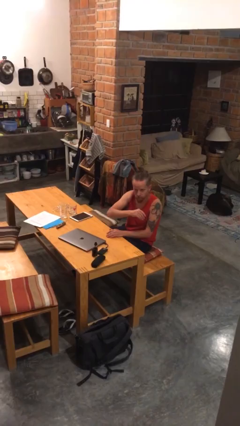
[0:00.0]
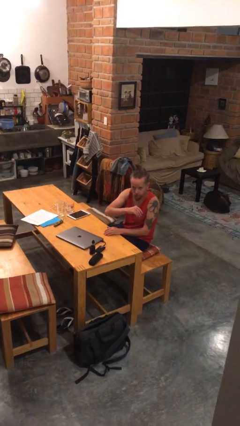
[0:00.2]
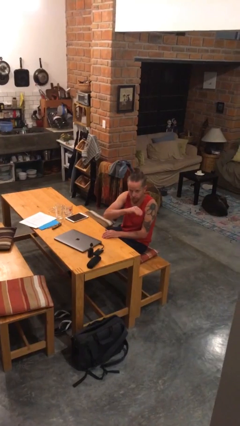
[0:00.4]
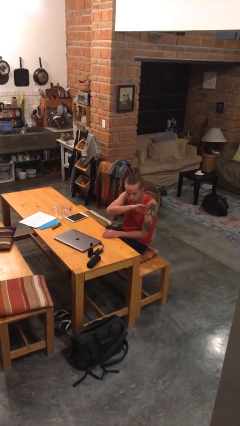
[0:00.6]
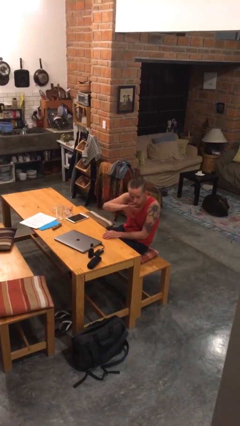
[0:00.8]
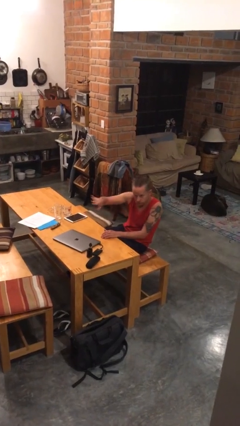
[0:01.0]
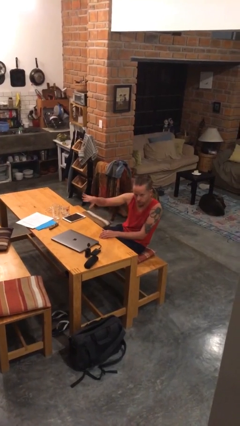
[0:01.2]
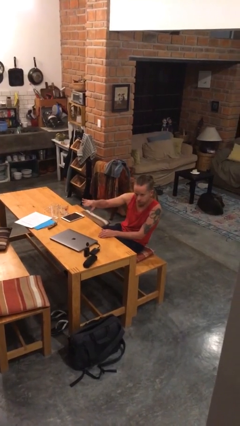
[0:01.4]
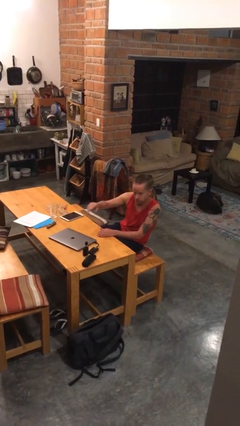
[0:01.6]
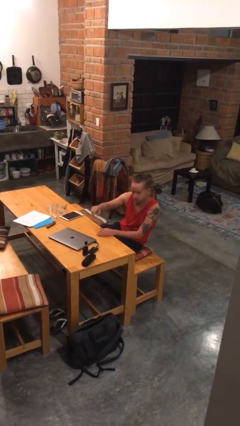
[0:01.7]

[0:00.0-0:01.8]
person gestures swipe right

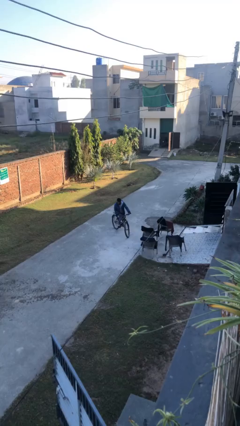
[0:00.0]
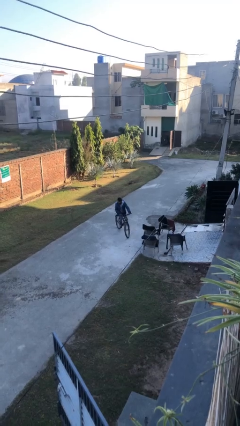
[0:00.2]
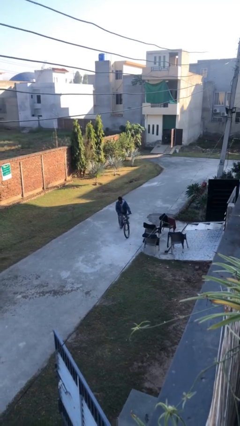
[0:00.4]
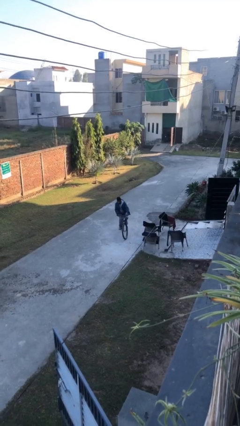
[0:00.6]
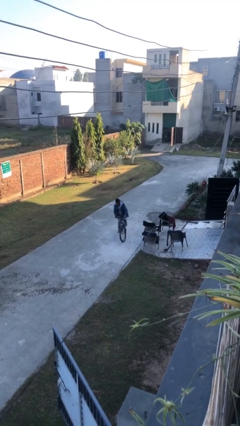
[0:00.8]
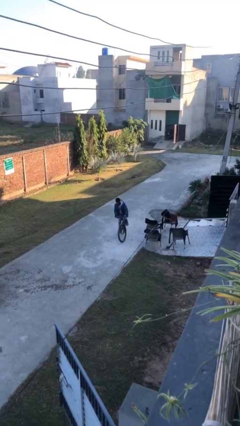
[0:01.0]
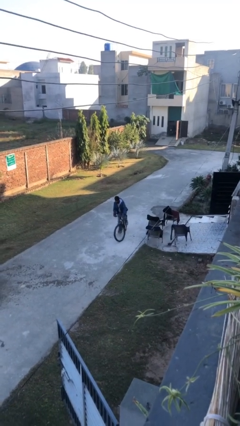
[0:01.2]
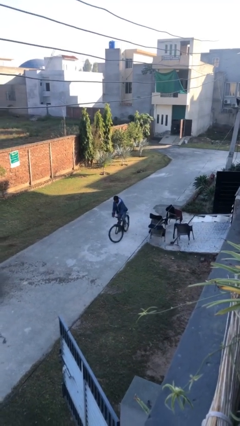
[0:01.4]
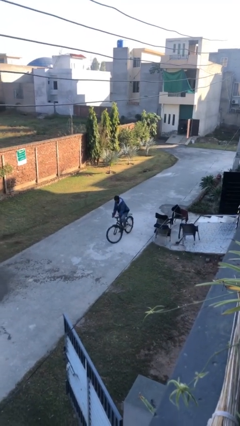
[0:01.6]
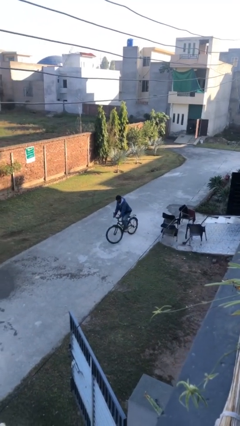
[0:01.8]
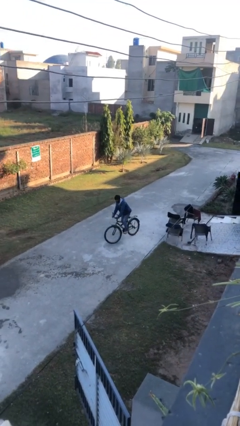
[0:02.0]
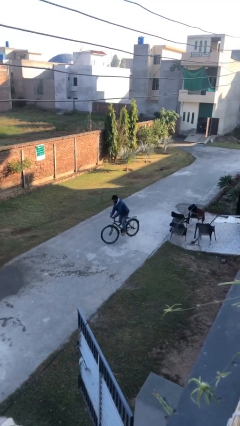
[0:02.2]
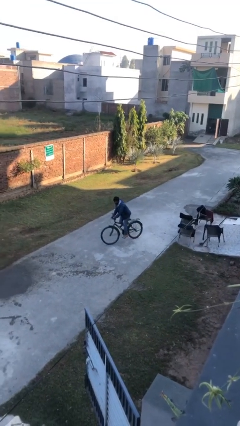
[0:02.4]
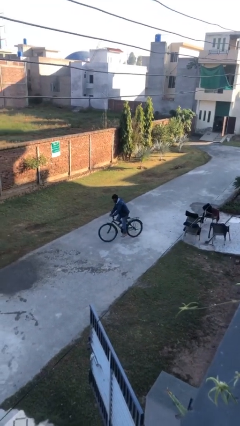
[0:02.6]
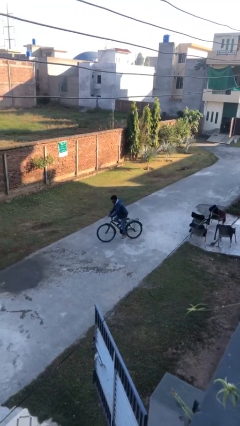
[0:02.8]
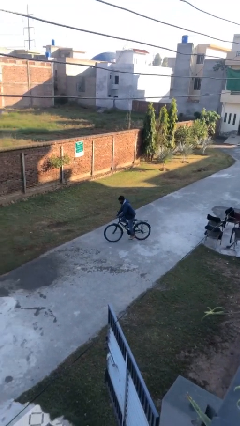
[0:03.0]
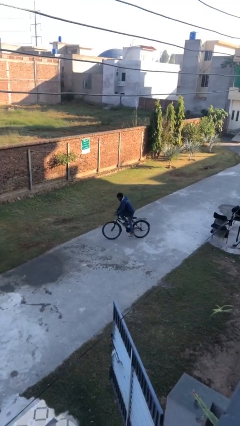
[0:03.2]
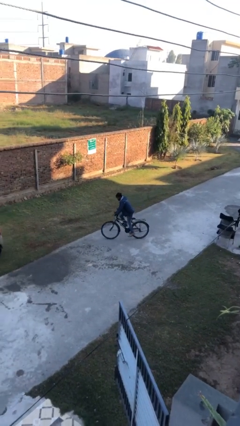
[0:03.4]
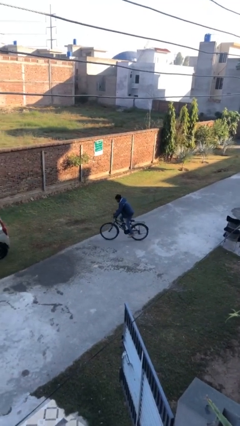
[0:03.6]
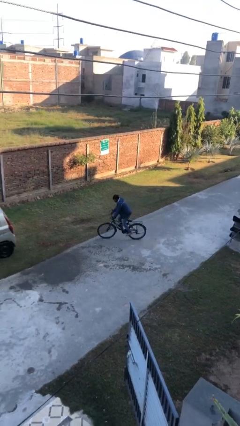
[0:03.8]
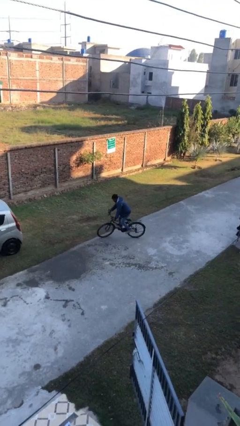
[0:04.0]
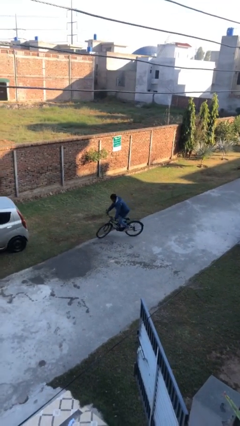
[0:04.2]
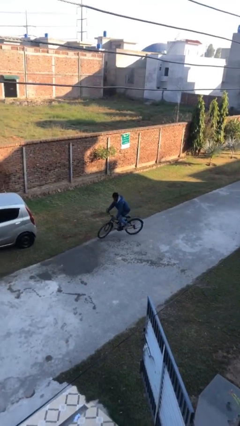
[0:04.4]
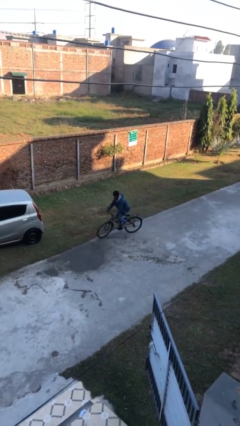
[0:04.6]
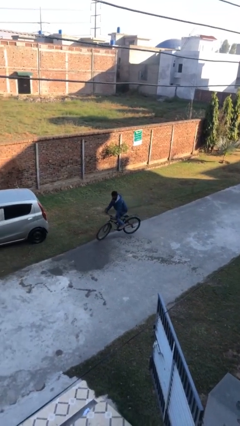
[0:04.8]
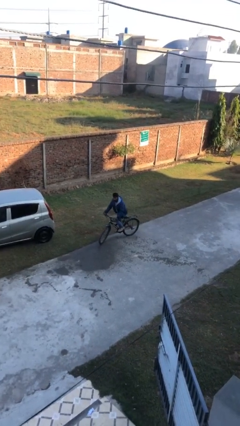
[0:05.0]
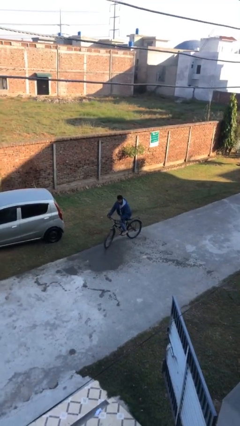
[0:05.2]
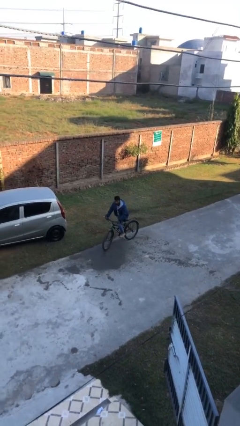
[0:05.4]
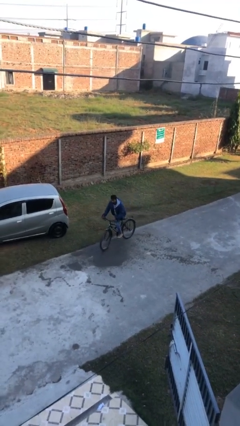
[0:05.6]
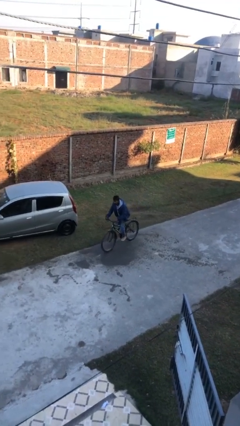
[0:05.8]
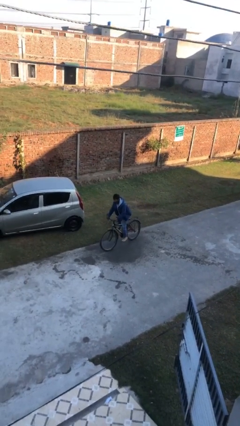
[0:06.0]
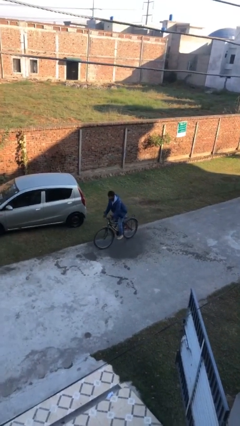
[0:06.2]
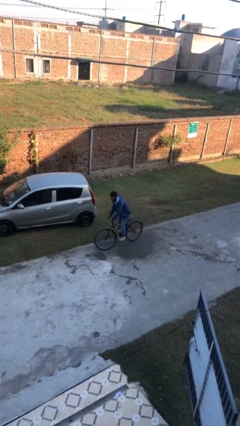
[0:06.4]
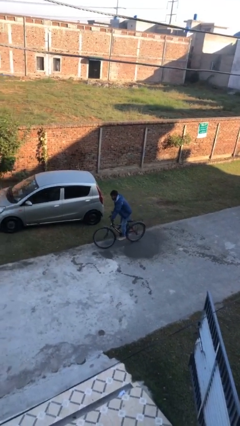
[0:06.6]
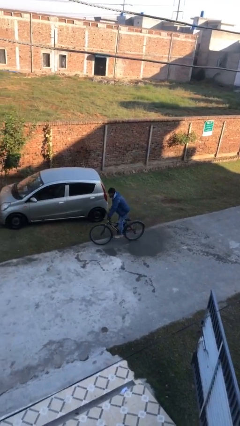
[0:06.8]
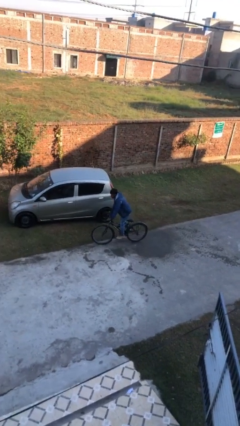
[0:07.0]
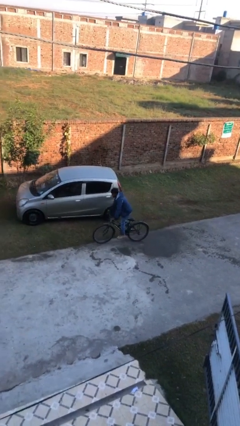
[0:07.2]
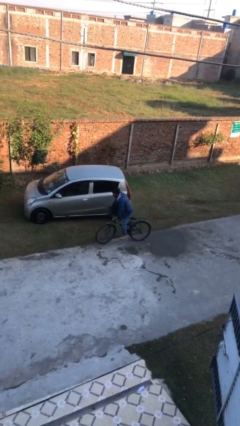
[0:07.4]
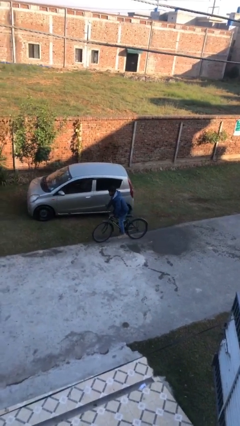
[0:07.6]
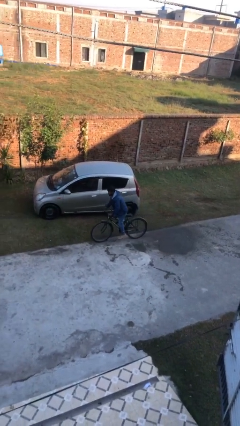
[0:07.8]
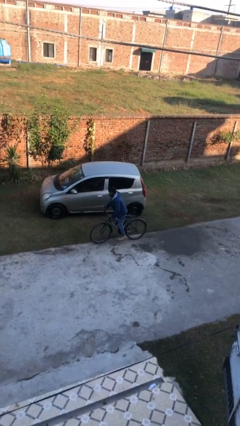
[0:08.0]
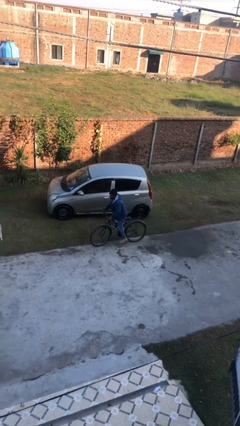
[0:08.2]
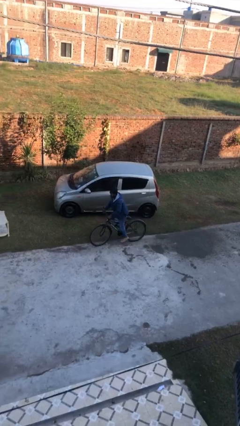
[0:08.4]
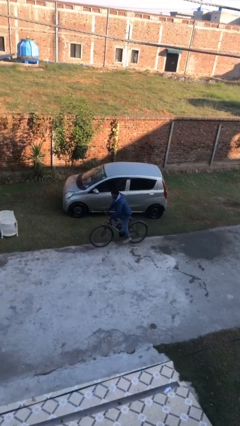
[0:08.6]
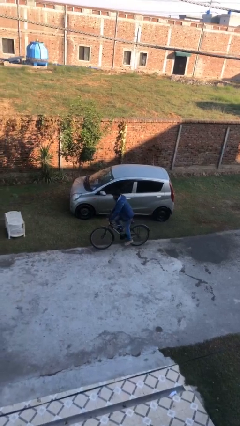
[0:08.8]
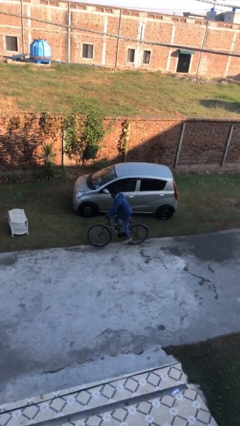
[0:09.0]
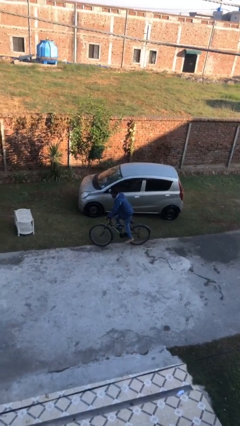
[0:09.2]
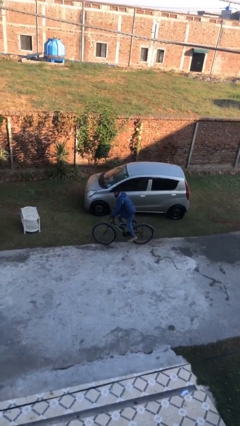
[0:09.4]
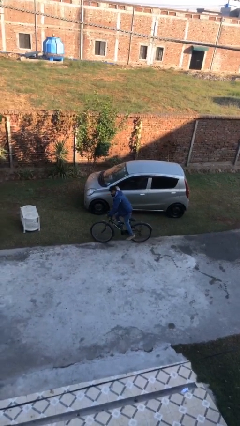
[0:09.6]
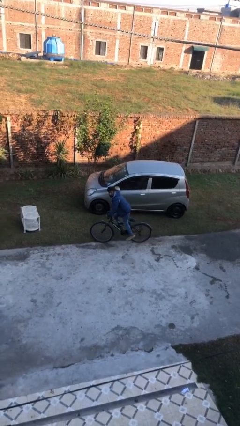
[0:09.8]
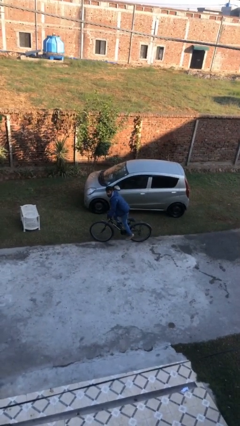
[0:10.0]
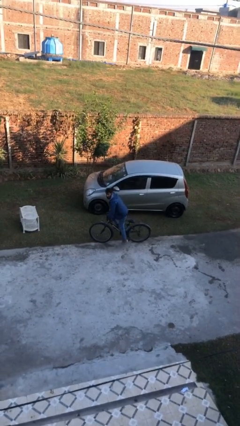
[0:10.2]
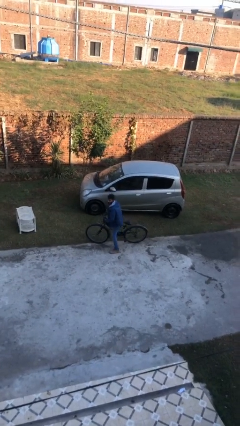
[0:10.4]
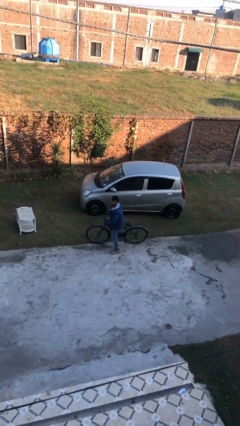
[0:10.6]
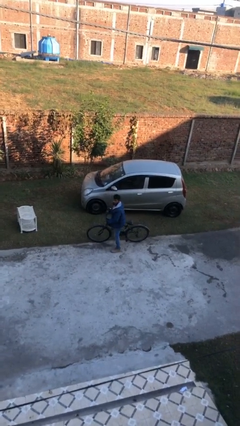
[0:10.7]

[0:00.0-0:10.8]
person rides bicycle

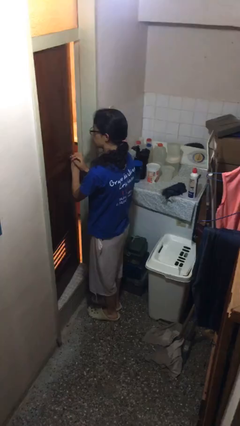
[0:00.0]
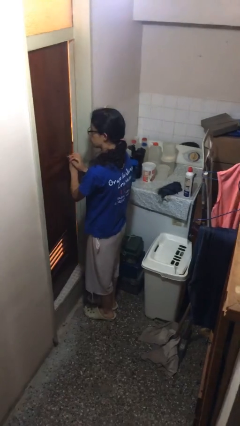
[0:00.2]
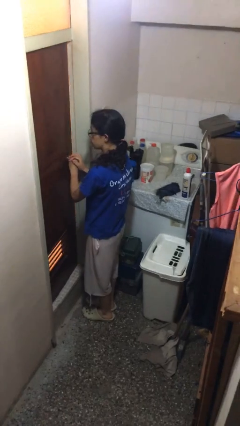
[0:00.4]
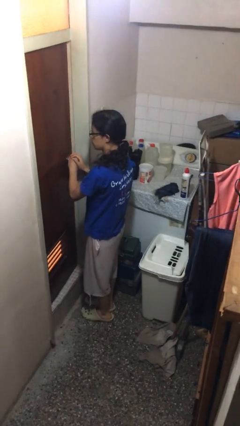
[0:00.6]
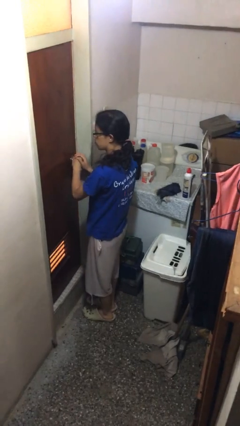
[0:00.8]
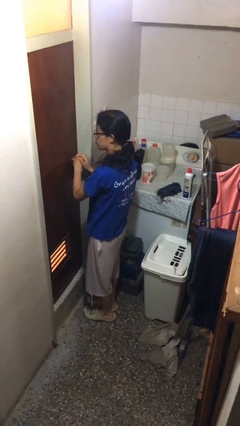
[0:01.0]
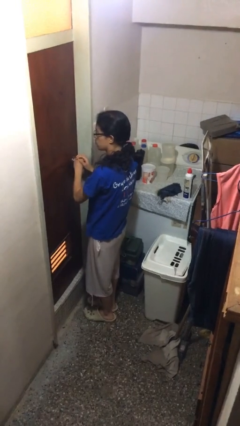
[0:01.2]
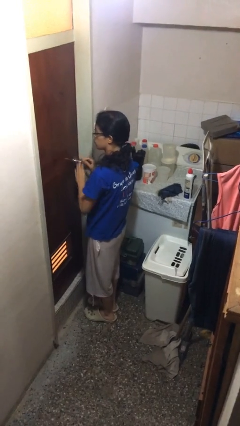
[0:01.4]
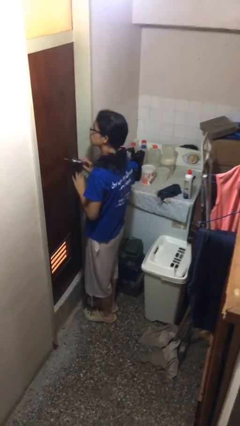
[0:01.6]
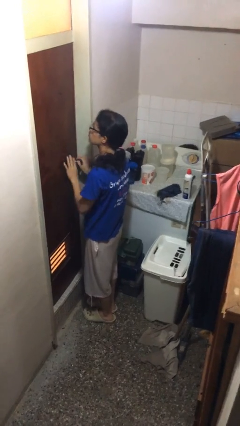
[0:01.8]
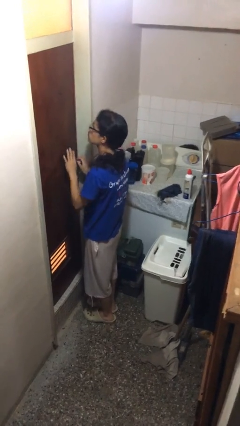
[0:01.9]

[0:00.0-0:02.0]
person closes facility door

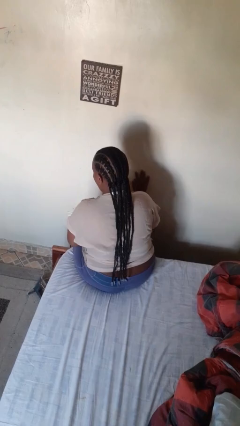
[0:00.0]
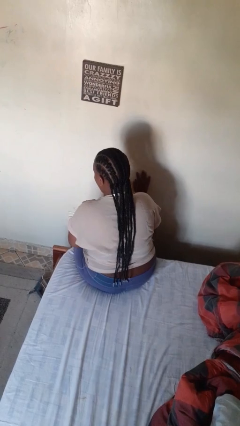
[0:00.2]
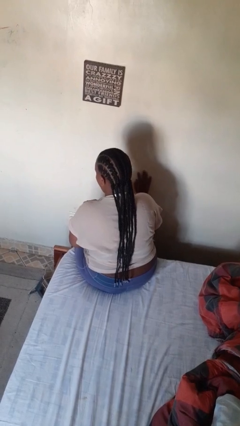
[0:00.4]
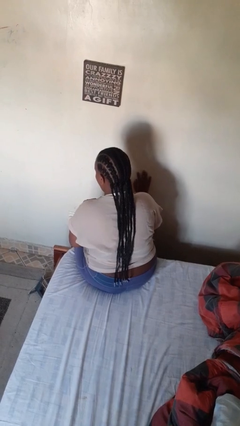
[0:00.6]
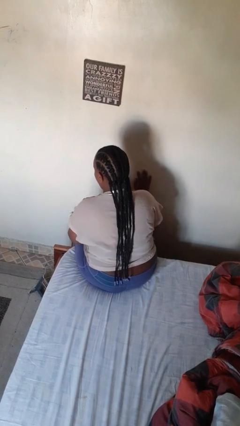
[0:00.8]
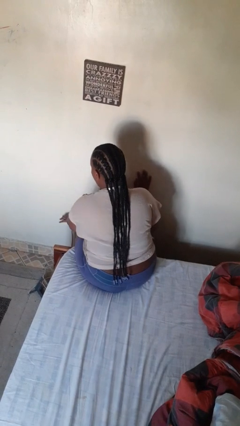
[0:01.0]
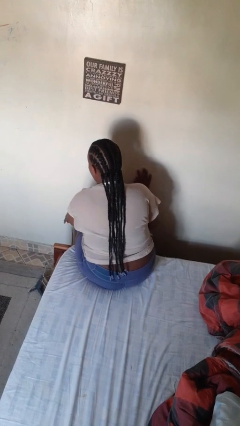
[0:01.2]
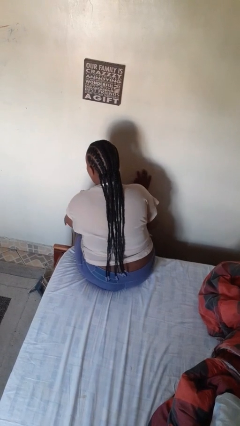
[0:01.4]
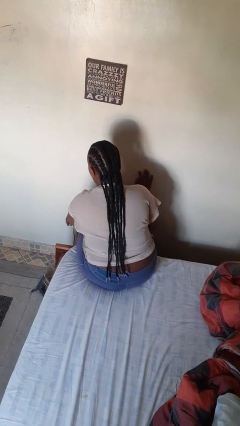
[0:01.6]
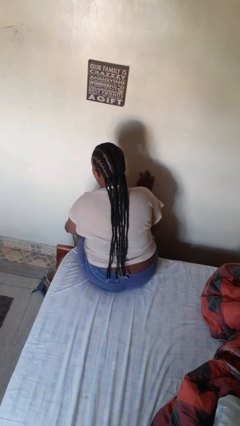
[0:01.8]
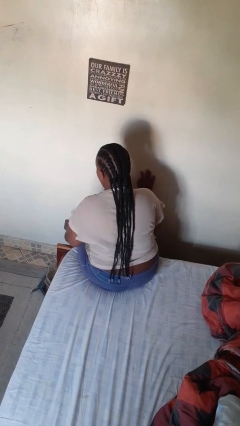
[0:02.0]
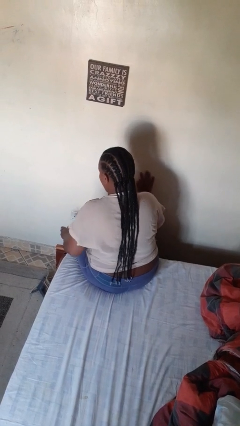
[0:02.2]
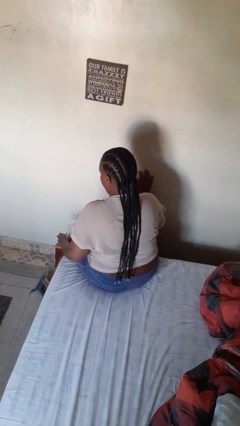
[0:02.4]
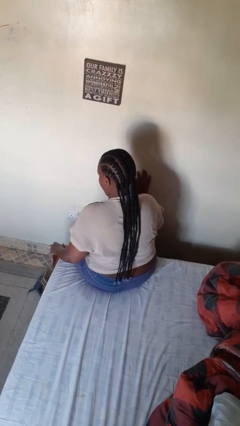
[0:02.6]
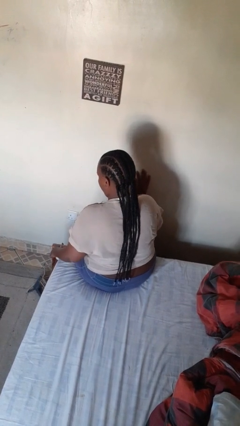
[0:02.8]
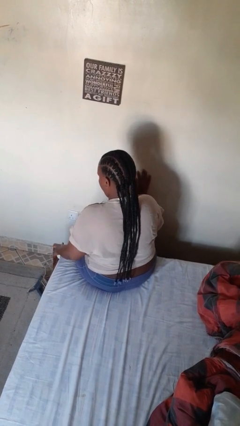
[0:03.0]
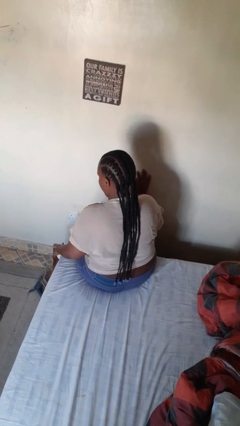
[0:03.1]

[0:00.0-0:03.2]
person unplugs from electrical socket

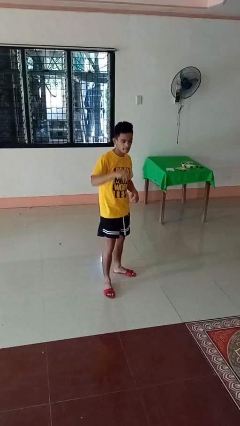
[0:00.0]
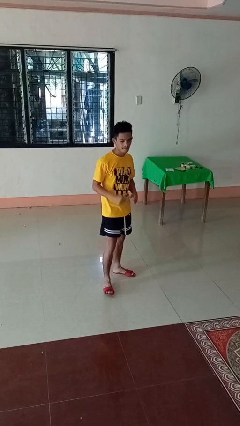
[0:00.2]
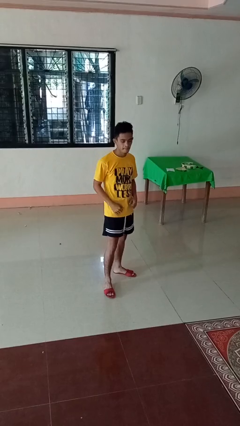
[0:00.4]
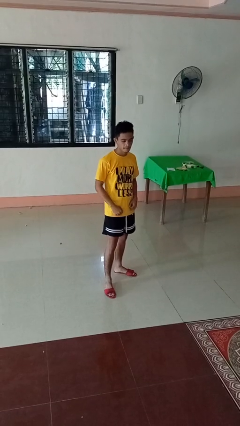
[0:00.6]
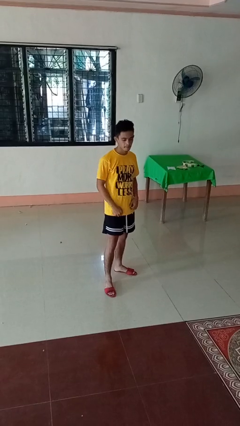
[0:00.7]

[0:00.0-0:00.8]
person punches
